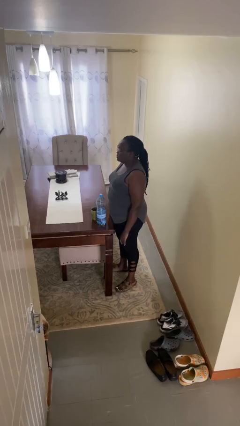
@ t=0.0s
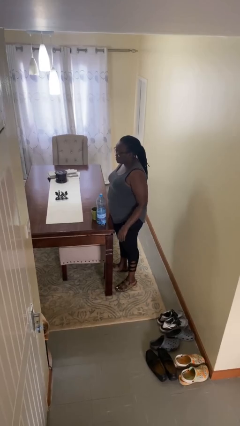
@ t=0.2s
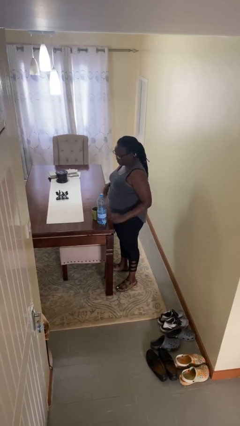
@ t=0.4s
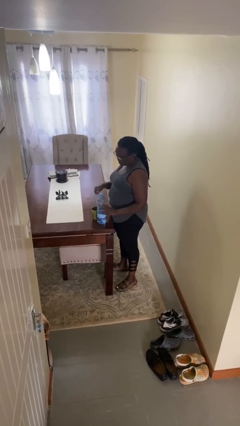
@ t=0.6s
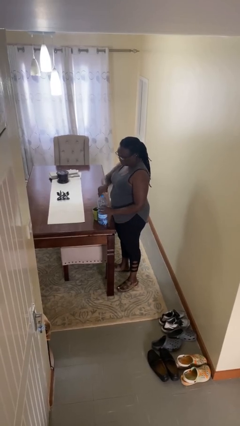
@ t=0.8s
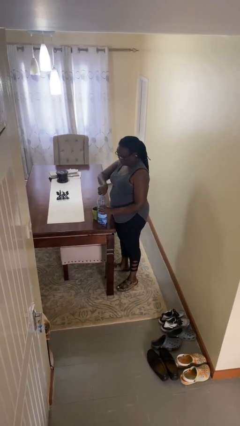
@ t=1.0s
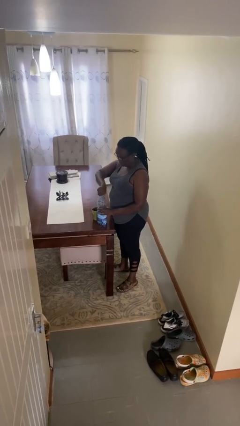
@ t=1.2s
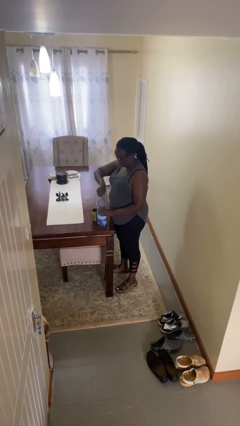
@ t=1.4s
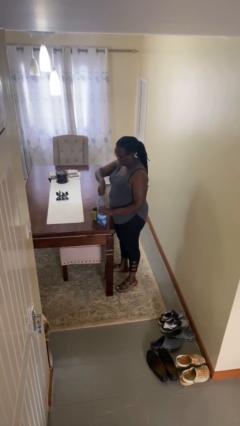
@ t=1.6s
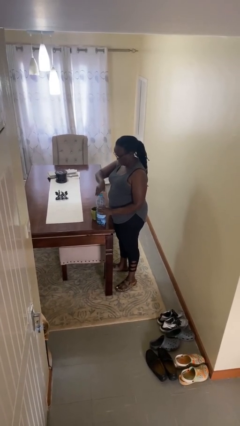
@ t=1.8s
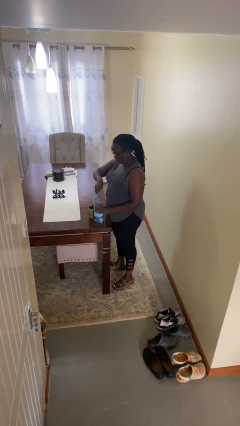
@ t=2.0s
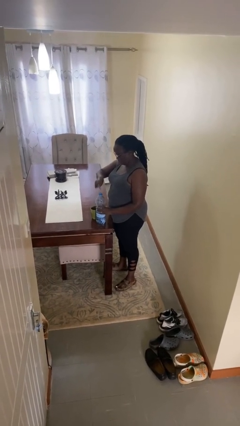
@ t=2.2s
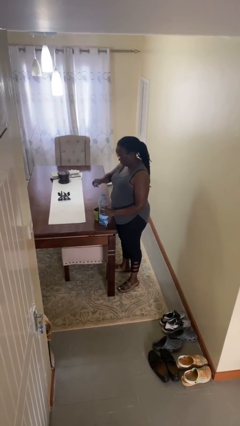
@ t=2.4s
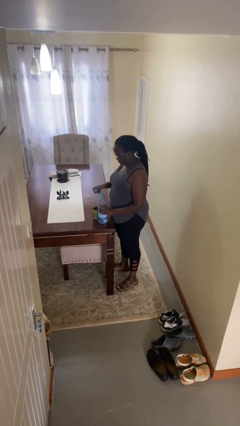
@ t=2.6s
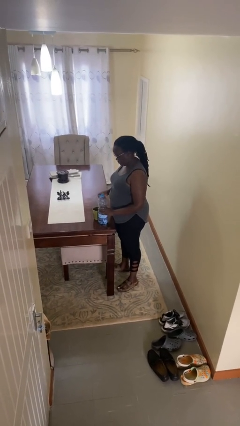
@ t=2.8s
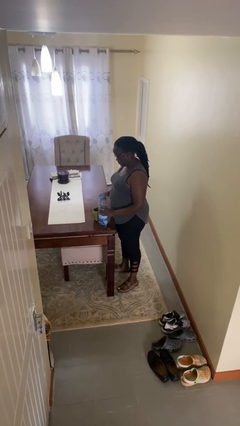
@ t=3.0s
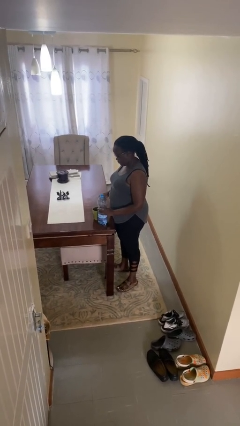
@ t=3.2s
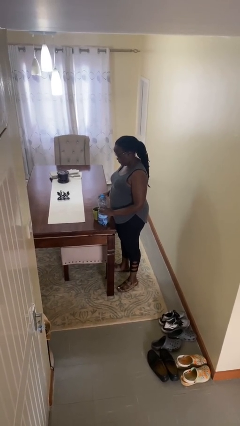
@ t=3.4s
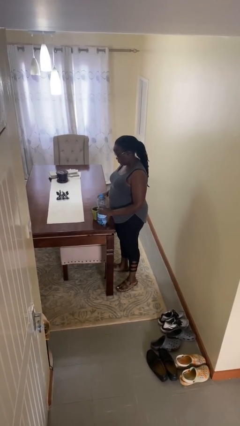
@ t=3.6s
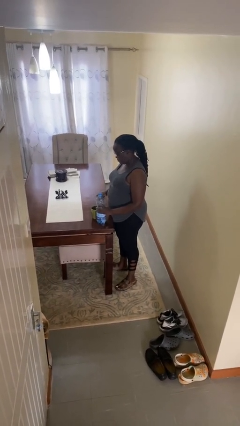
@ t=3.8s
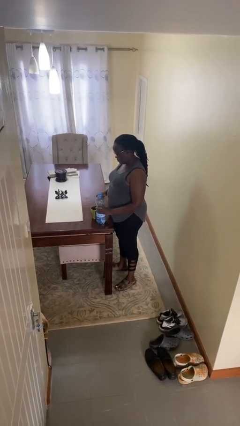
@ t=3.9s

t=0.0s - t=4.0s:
person unscrews lid from bottle

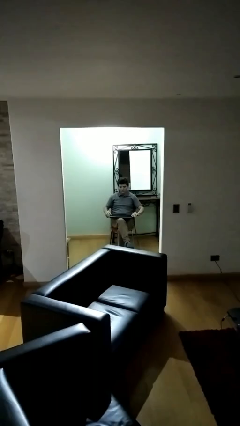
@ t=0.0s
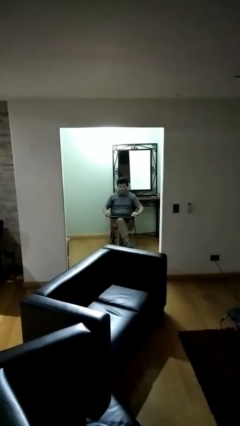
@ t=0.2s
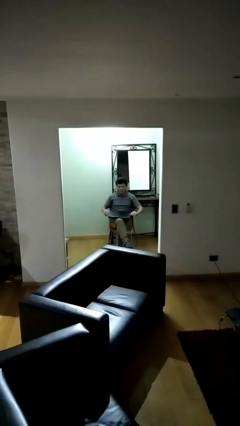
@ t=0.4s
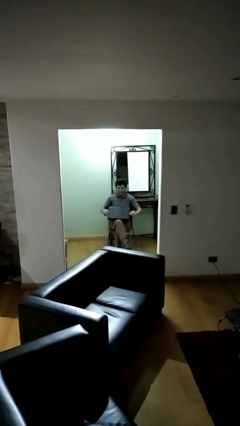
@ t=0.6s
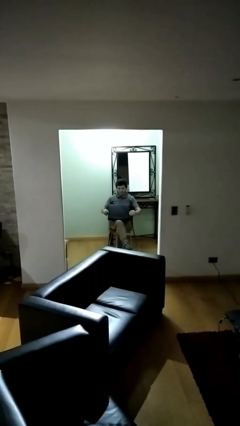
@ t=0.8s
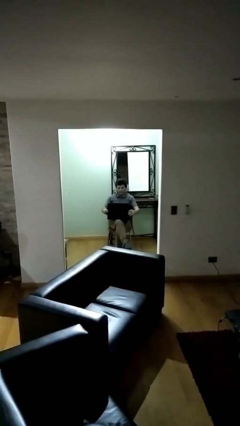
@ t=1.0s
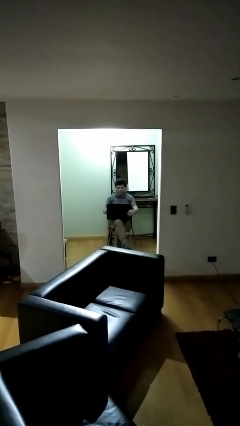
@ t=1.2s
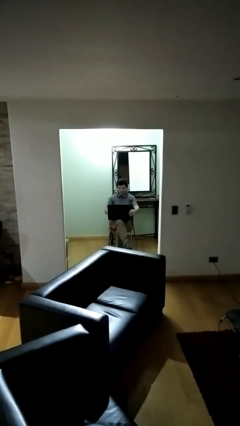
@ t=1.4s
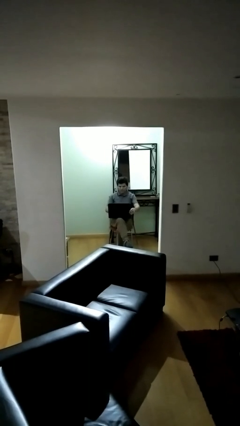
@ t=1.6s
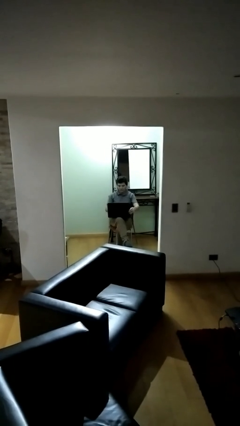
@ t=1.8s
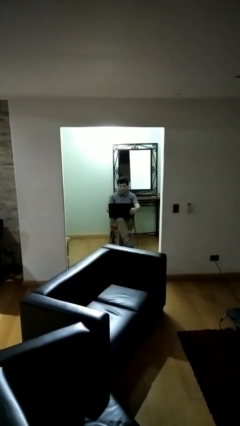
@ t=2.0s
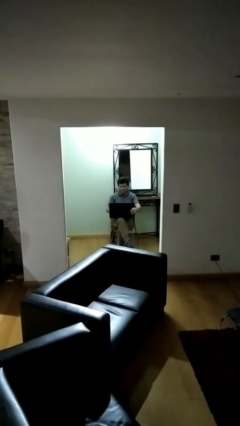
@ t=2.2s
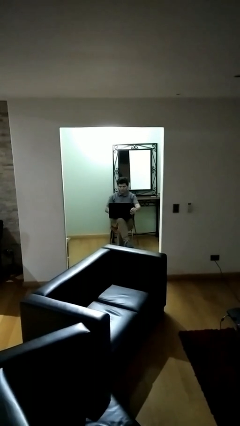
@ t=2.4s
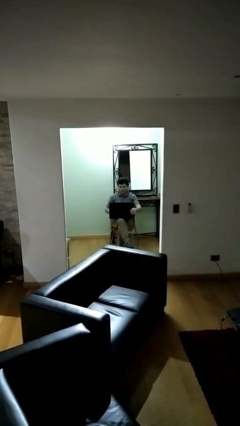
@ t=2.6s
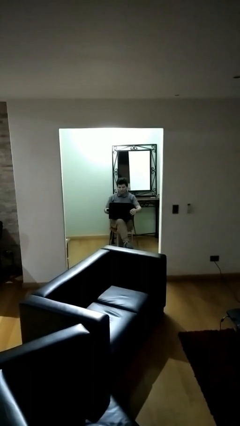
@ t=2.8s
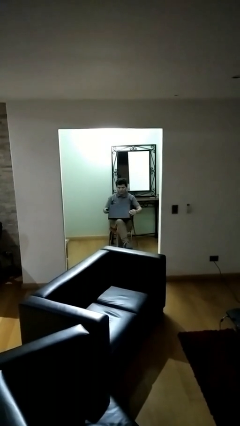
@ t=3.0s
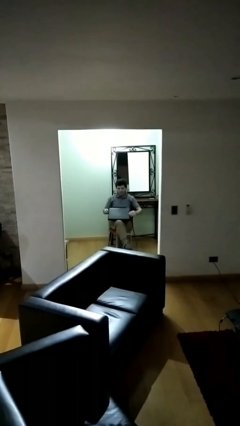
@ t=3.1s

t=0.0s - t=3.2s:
person interacts with laptop

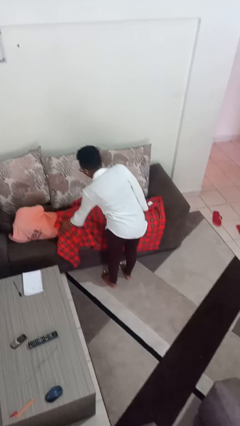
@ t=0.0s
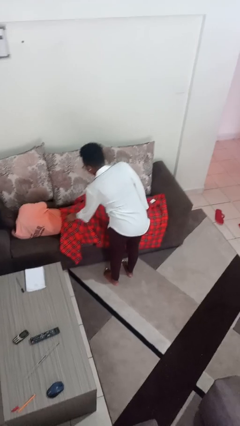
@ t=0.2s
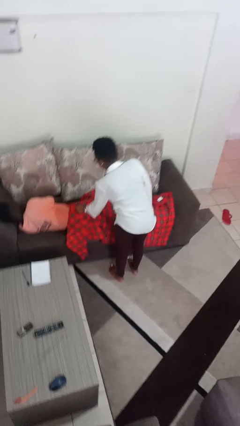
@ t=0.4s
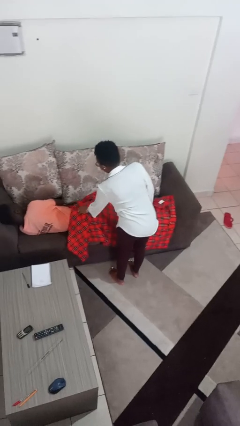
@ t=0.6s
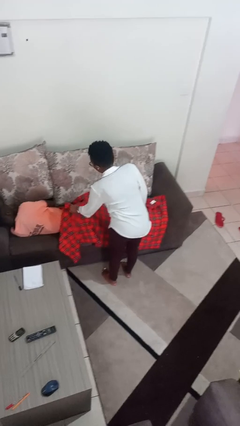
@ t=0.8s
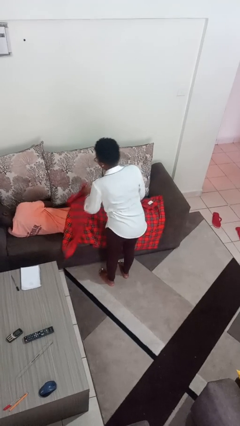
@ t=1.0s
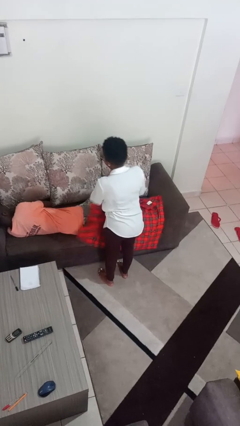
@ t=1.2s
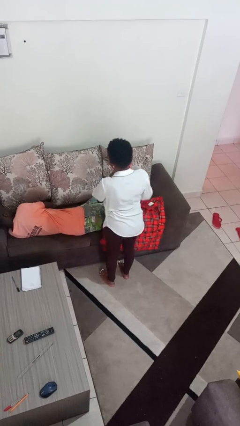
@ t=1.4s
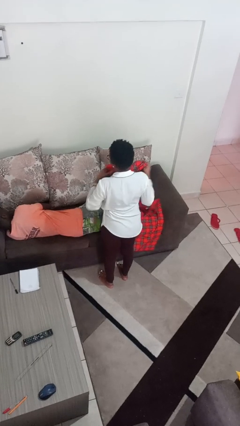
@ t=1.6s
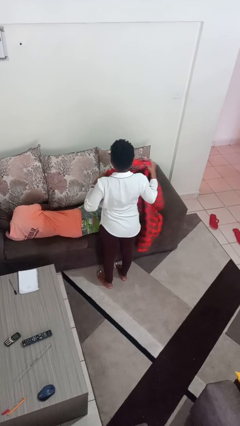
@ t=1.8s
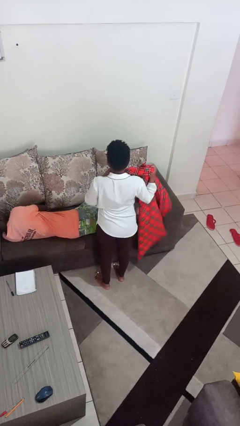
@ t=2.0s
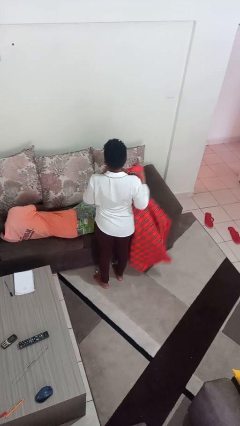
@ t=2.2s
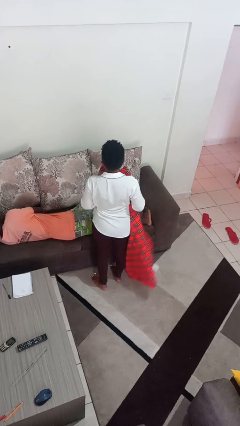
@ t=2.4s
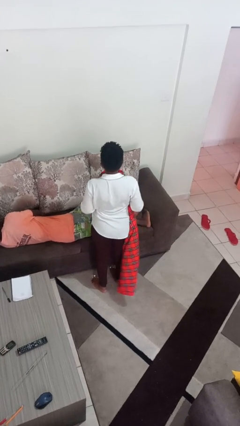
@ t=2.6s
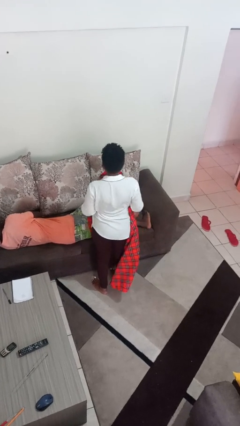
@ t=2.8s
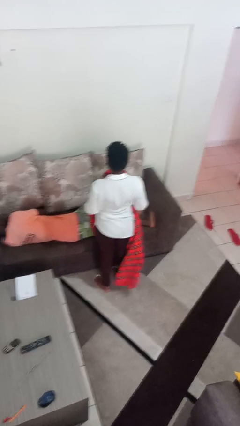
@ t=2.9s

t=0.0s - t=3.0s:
person uncovers friend with blanket

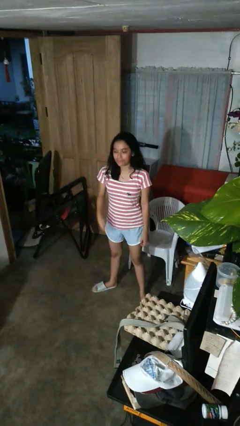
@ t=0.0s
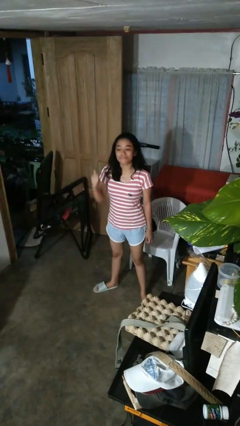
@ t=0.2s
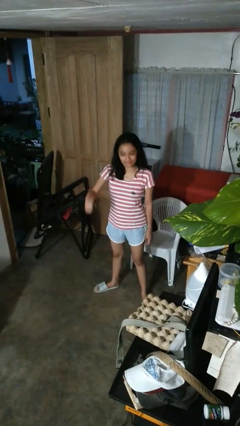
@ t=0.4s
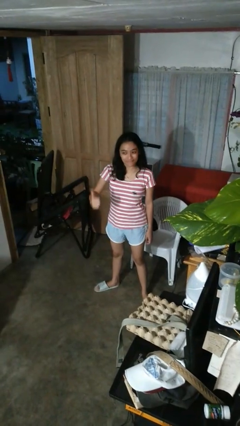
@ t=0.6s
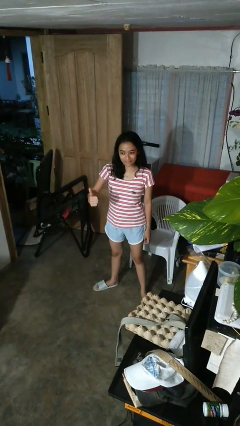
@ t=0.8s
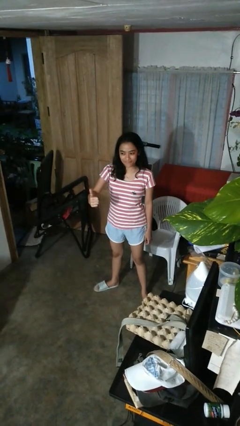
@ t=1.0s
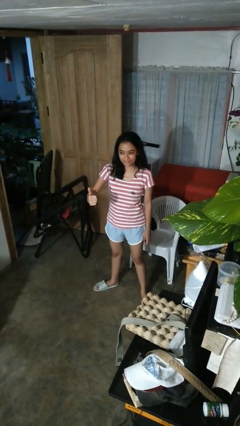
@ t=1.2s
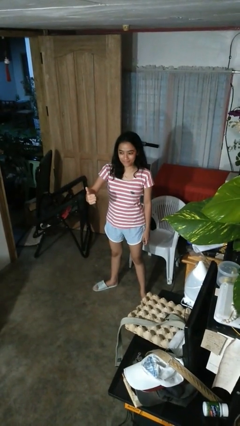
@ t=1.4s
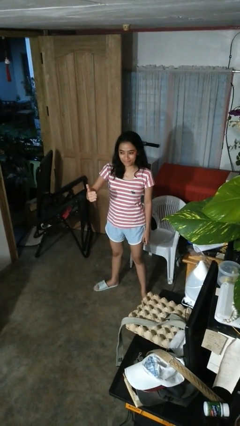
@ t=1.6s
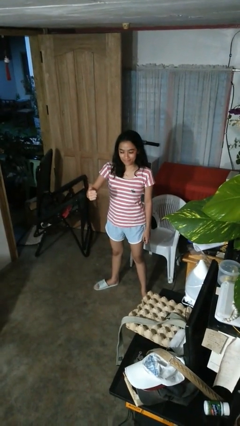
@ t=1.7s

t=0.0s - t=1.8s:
person gestures thumbs up

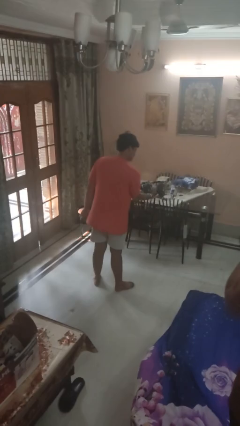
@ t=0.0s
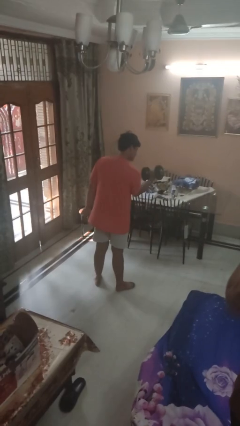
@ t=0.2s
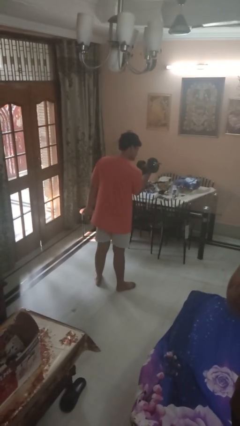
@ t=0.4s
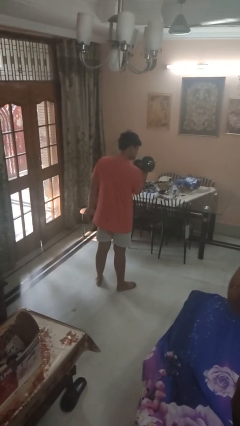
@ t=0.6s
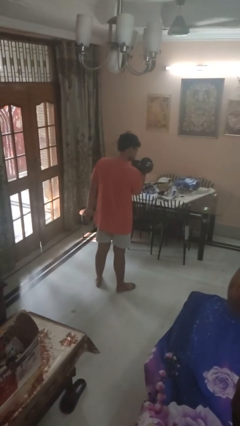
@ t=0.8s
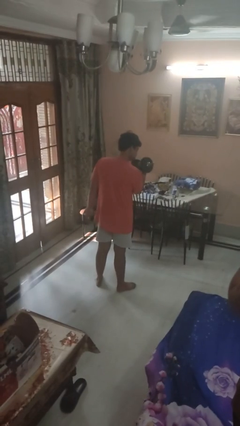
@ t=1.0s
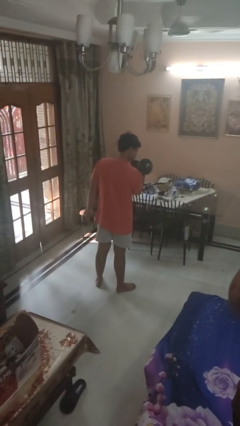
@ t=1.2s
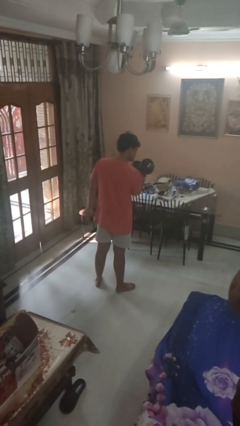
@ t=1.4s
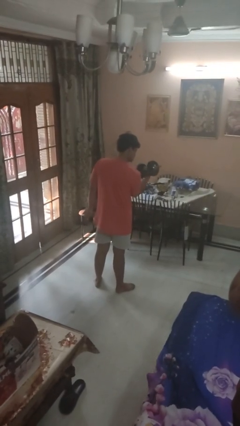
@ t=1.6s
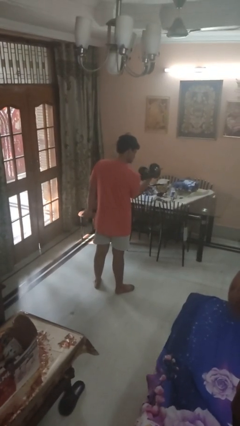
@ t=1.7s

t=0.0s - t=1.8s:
person lifts dumbbells

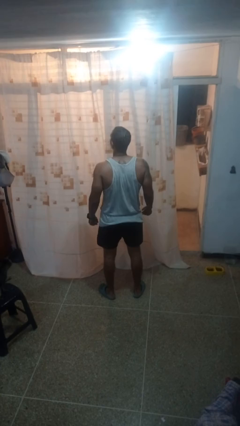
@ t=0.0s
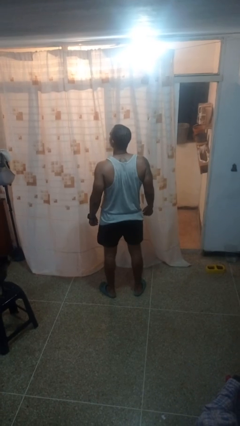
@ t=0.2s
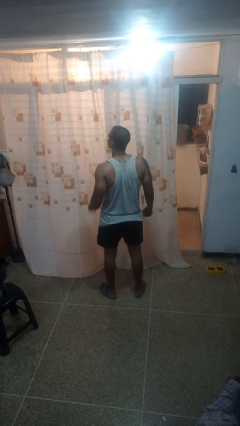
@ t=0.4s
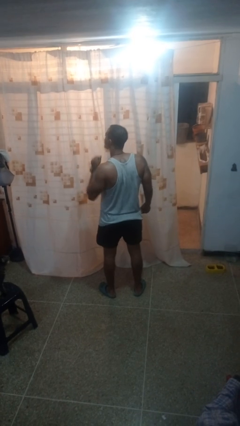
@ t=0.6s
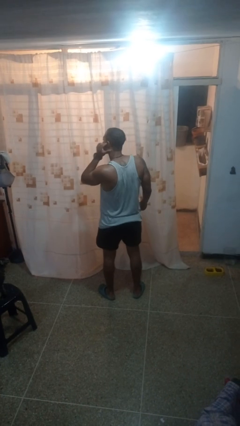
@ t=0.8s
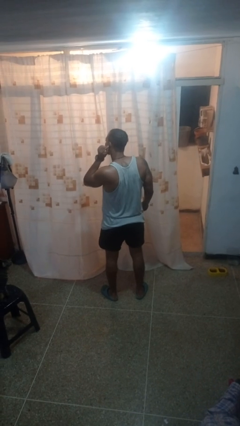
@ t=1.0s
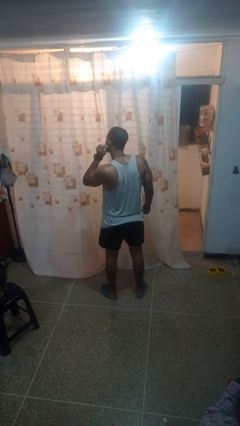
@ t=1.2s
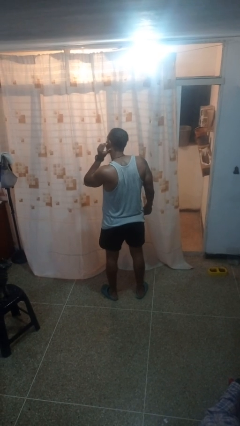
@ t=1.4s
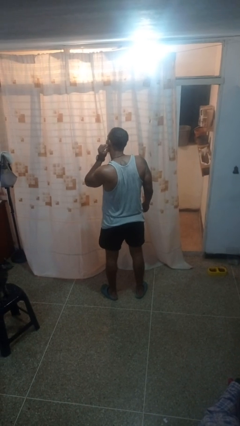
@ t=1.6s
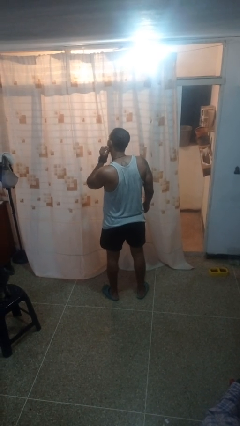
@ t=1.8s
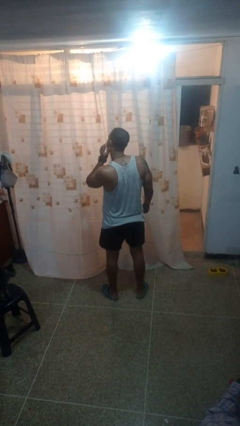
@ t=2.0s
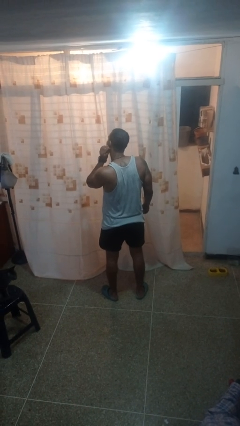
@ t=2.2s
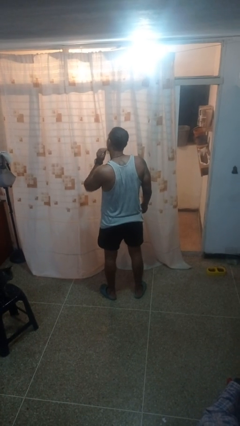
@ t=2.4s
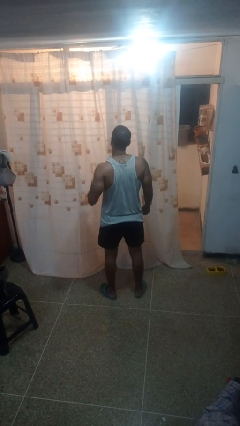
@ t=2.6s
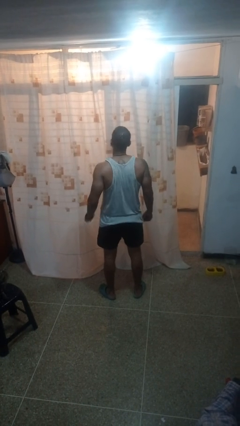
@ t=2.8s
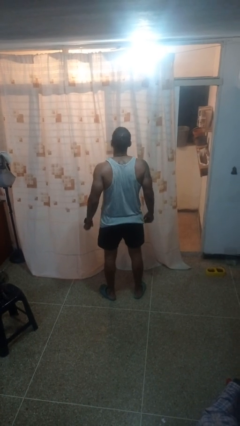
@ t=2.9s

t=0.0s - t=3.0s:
person touches earlobe

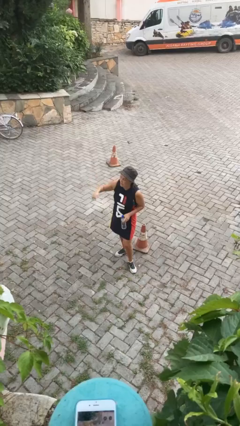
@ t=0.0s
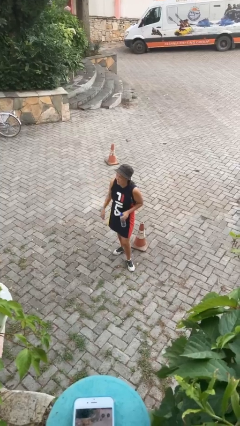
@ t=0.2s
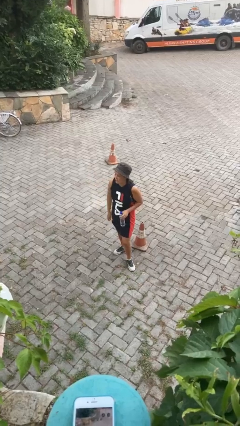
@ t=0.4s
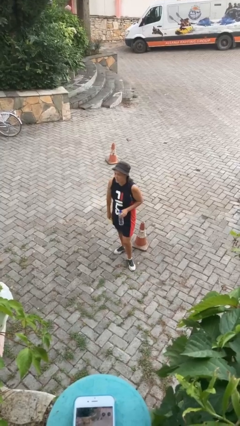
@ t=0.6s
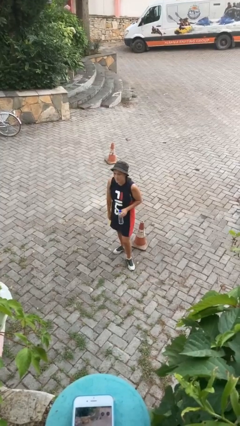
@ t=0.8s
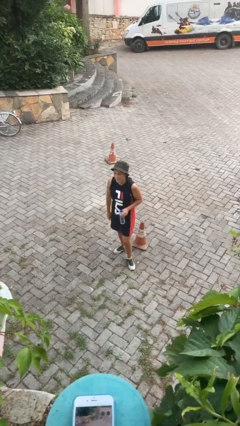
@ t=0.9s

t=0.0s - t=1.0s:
person gestures lower hand
